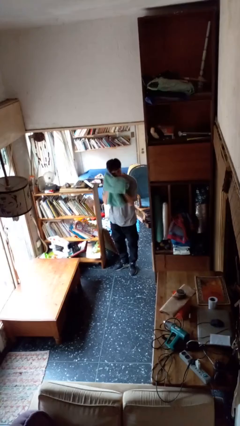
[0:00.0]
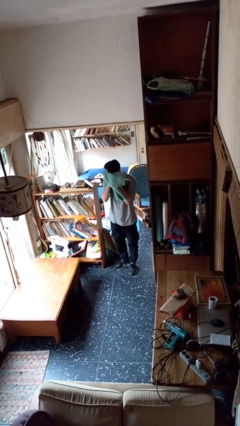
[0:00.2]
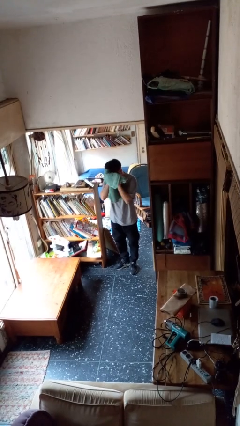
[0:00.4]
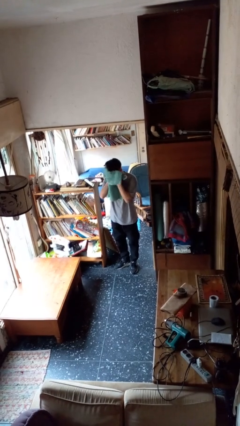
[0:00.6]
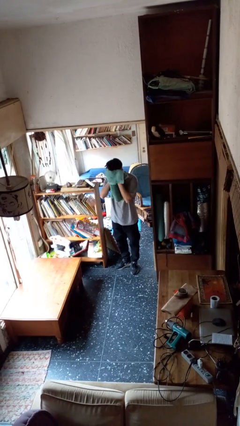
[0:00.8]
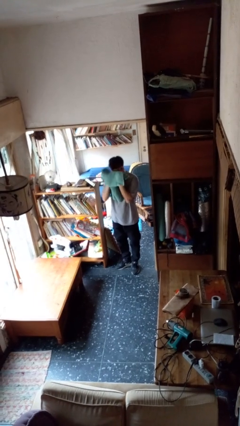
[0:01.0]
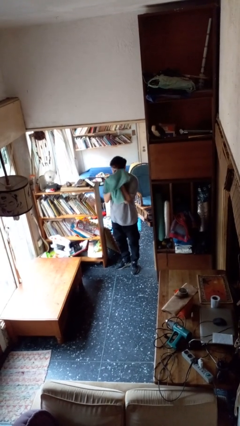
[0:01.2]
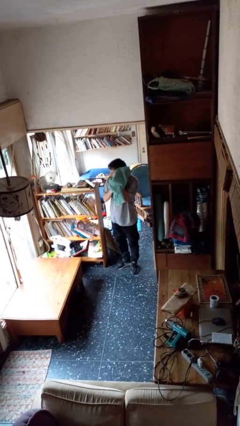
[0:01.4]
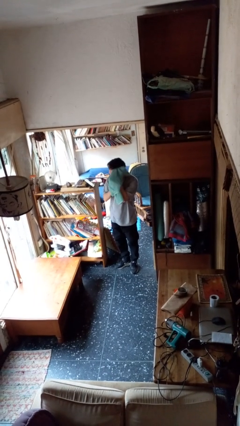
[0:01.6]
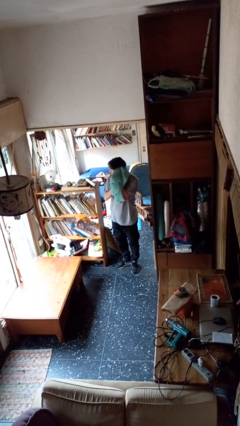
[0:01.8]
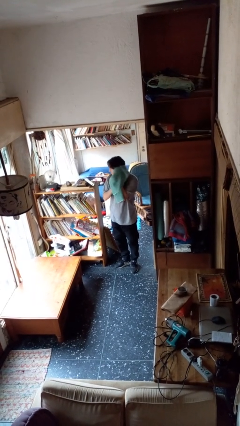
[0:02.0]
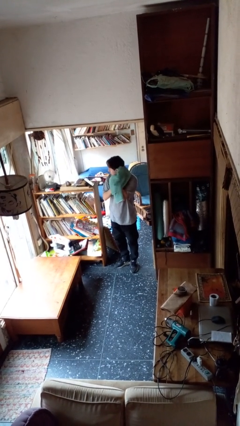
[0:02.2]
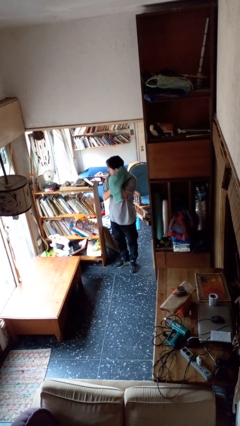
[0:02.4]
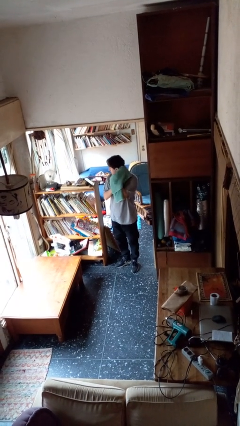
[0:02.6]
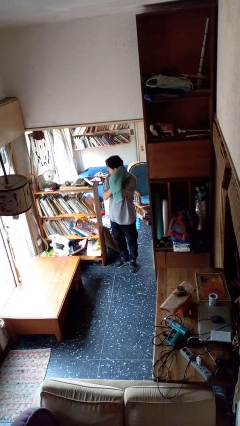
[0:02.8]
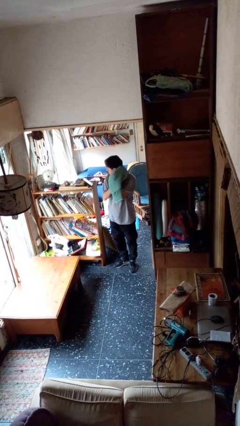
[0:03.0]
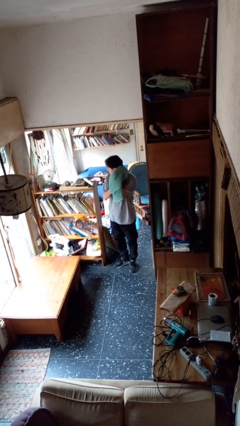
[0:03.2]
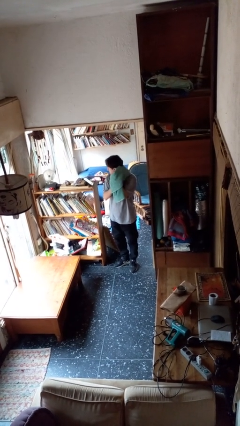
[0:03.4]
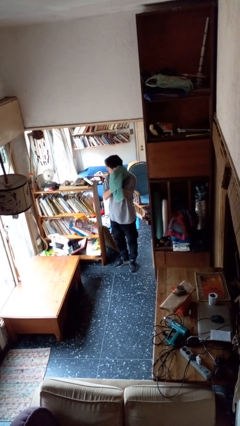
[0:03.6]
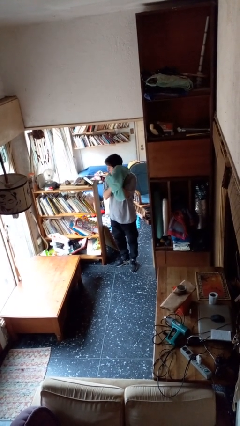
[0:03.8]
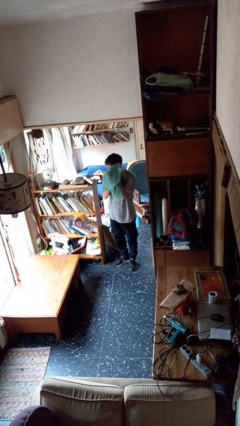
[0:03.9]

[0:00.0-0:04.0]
person dries hair with towel

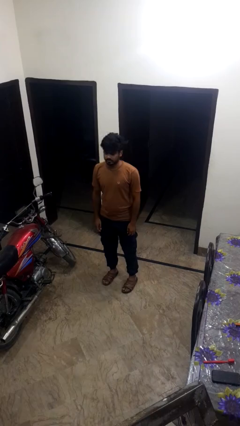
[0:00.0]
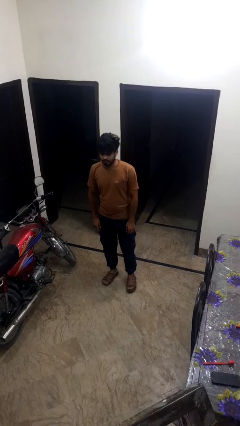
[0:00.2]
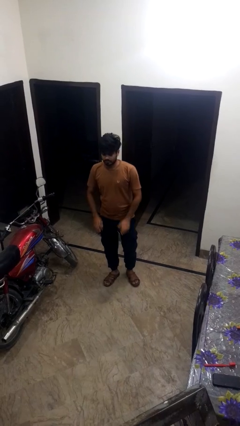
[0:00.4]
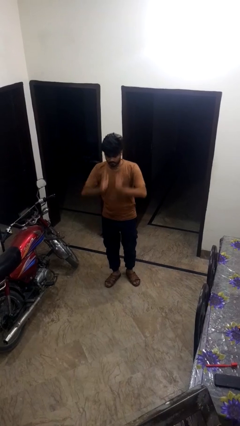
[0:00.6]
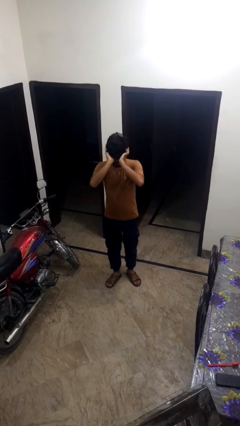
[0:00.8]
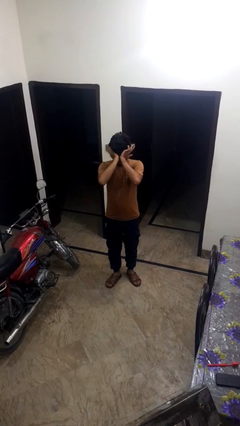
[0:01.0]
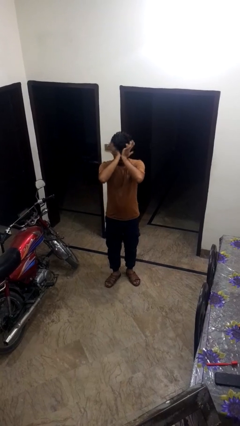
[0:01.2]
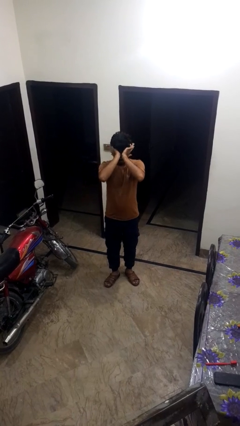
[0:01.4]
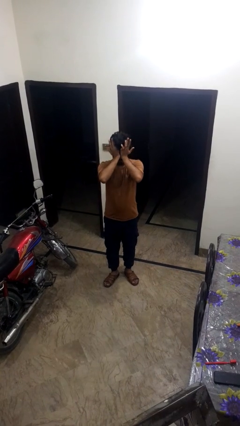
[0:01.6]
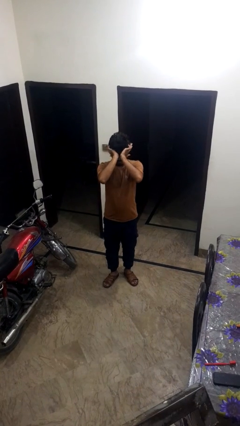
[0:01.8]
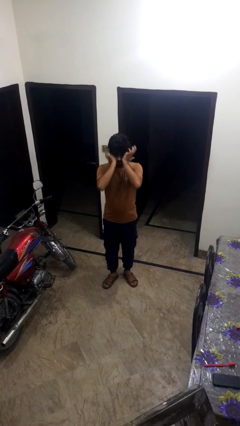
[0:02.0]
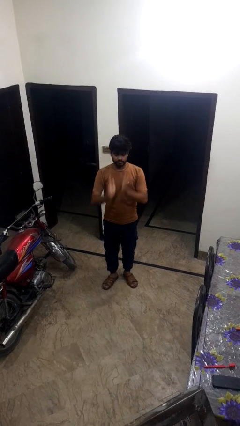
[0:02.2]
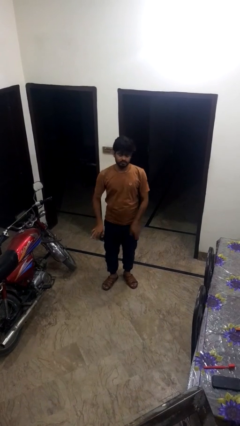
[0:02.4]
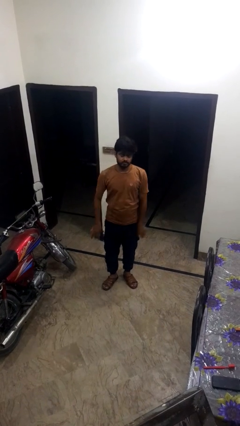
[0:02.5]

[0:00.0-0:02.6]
person rubs eyes

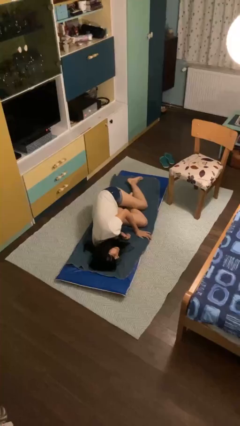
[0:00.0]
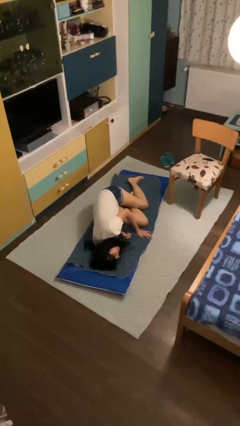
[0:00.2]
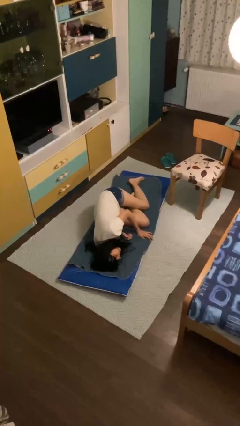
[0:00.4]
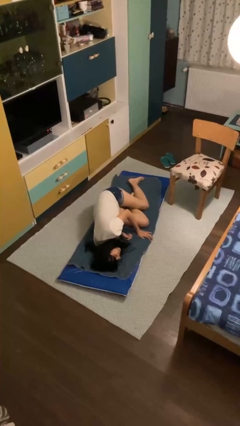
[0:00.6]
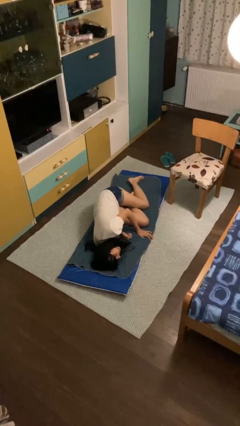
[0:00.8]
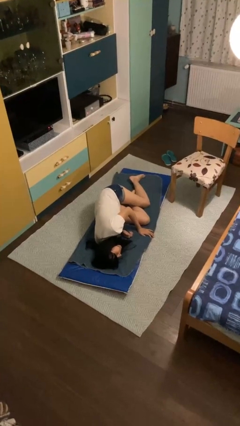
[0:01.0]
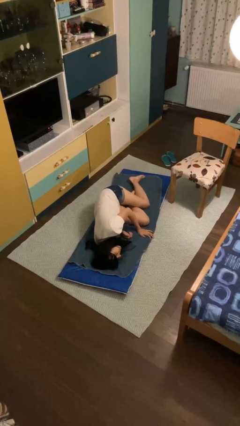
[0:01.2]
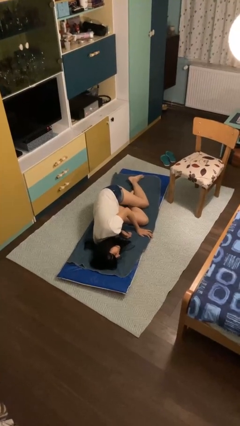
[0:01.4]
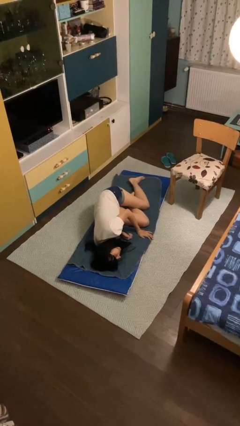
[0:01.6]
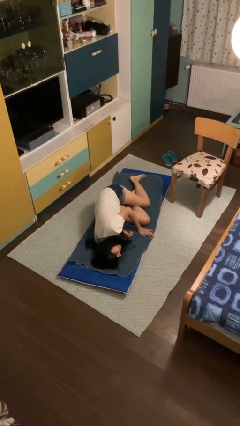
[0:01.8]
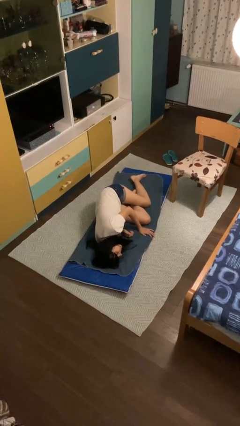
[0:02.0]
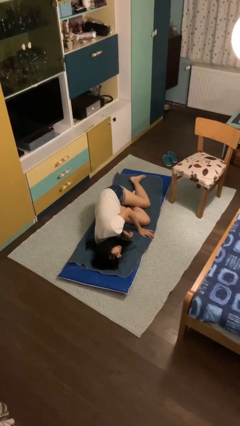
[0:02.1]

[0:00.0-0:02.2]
person lies down on floor

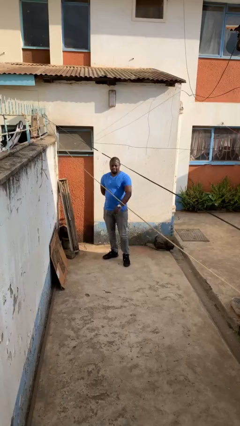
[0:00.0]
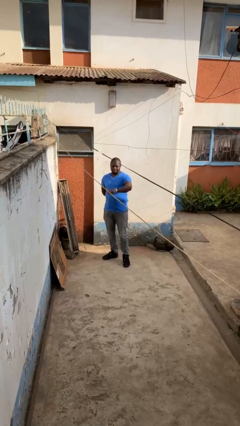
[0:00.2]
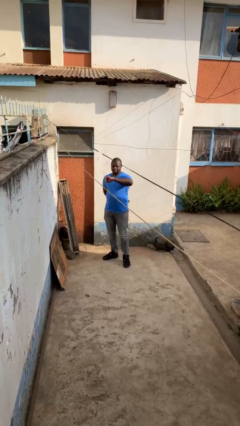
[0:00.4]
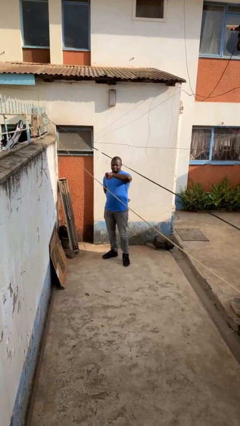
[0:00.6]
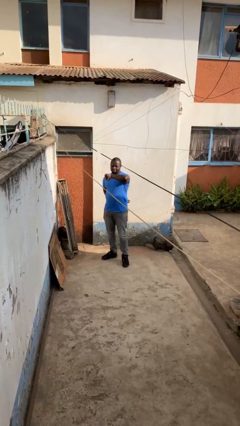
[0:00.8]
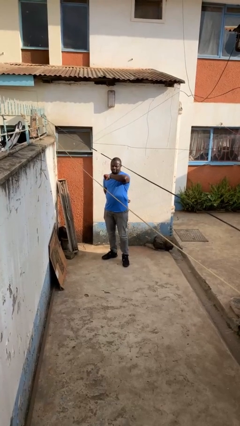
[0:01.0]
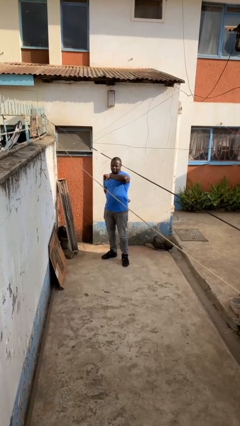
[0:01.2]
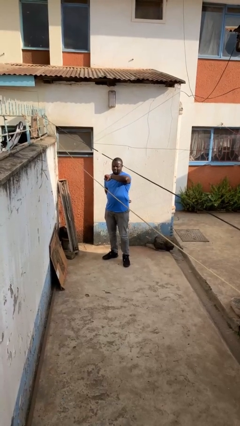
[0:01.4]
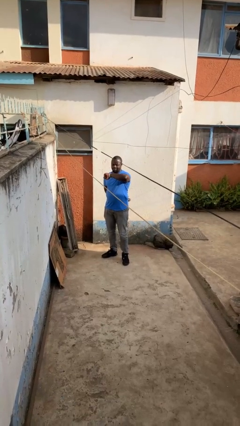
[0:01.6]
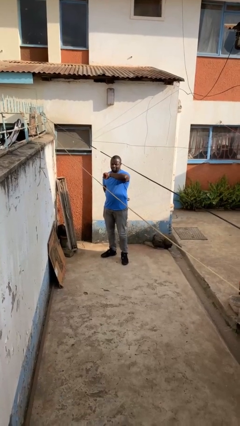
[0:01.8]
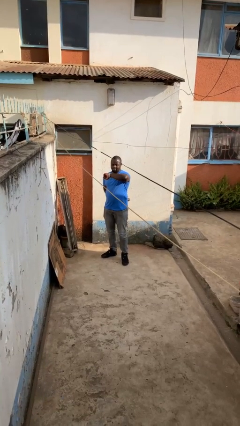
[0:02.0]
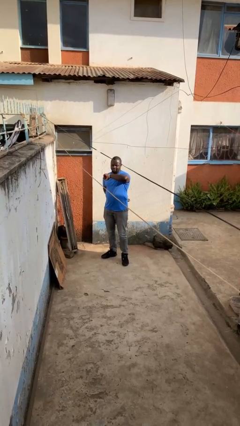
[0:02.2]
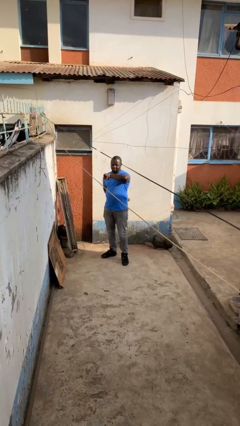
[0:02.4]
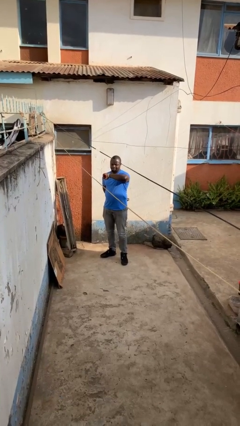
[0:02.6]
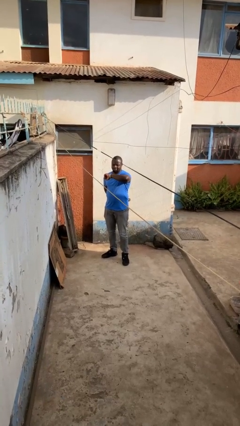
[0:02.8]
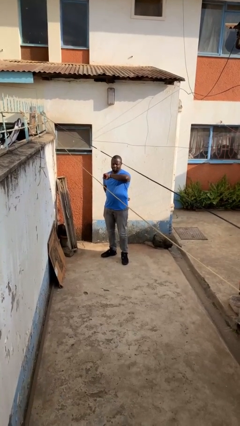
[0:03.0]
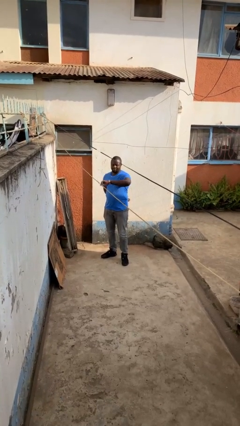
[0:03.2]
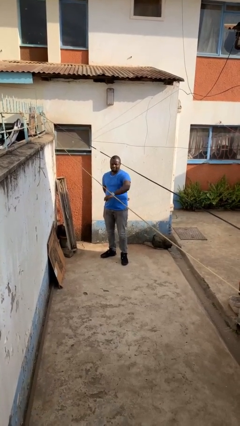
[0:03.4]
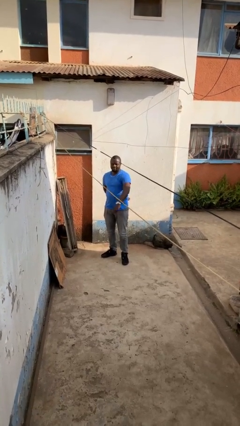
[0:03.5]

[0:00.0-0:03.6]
person looks at wristwatch

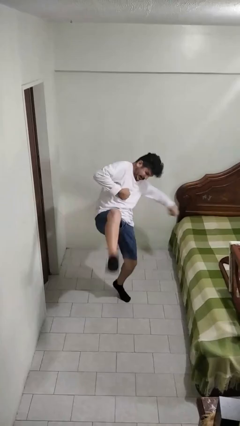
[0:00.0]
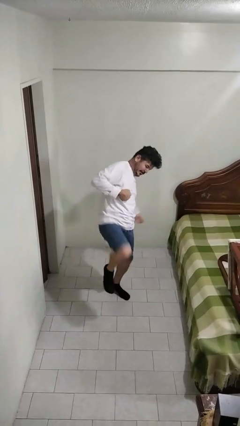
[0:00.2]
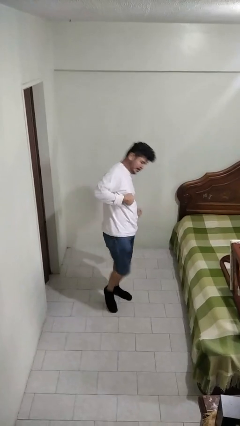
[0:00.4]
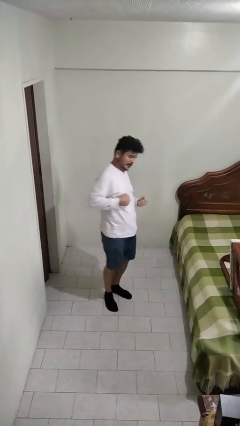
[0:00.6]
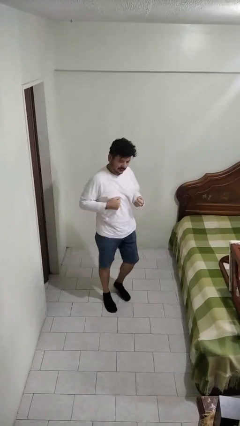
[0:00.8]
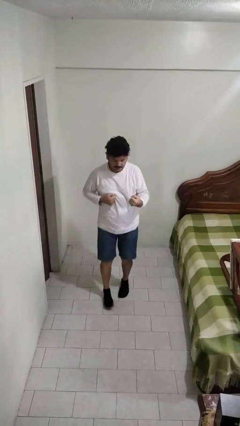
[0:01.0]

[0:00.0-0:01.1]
person karate kicks

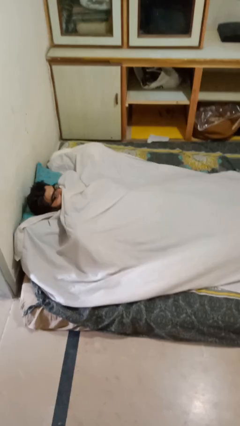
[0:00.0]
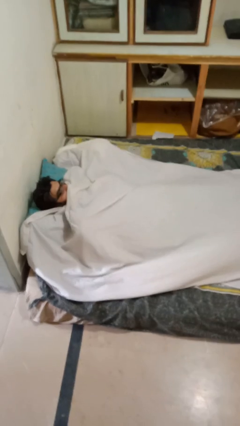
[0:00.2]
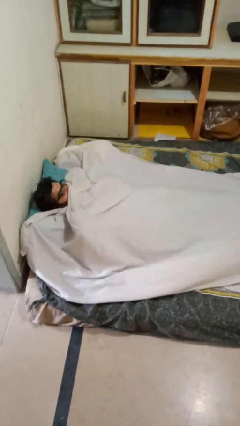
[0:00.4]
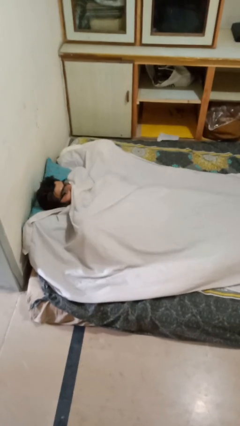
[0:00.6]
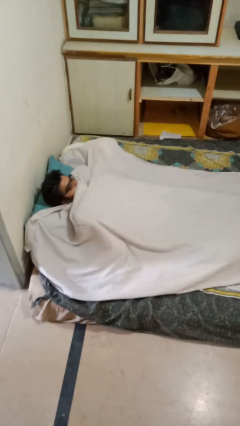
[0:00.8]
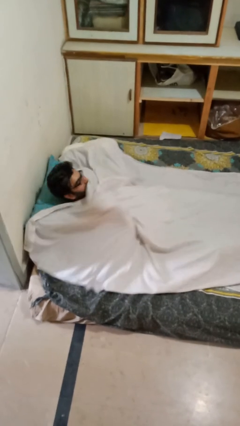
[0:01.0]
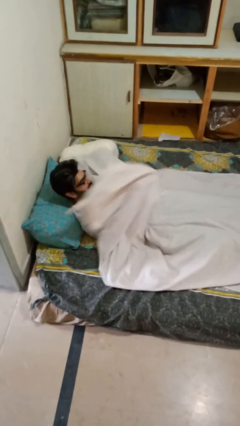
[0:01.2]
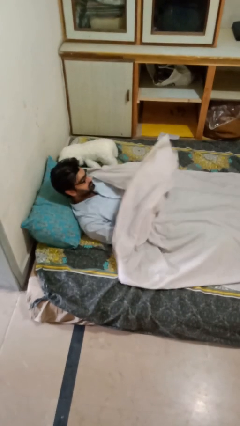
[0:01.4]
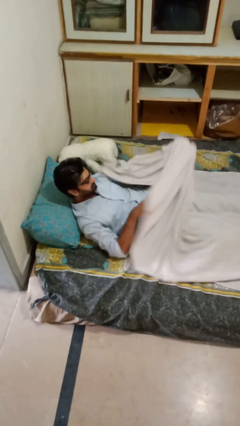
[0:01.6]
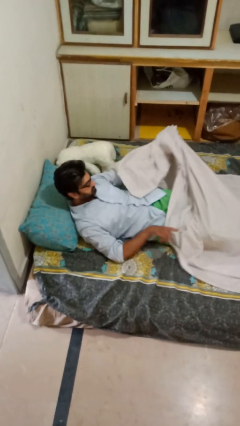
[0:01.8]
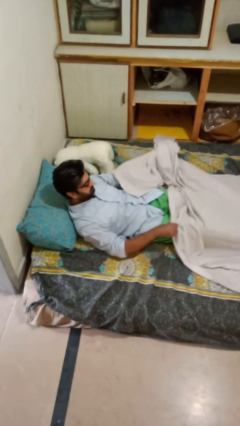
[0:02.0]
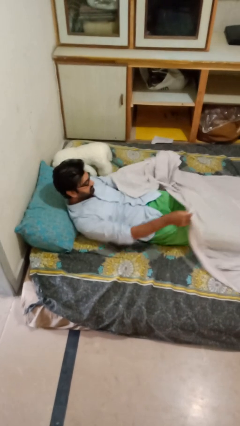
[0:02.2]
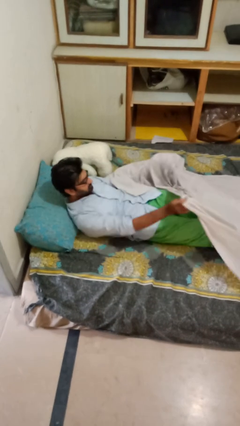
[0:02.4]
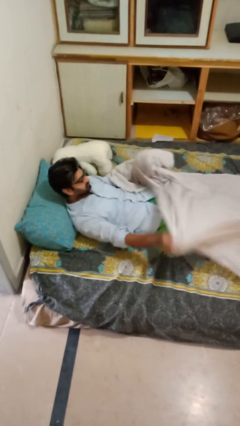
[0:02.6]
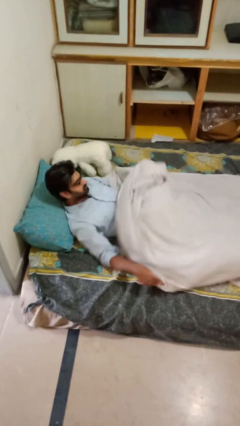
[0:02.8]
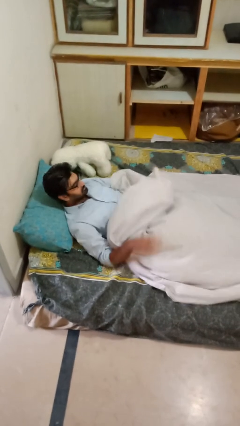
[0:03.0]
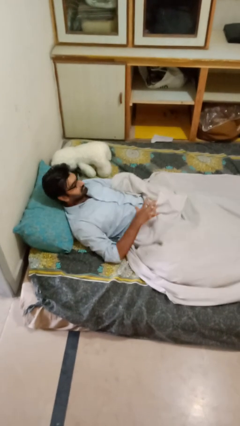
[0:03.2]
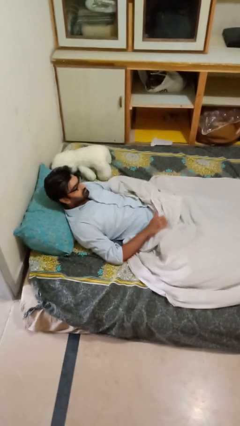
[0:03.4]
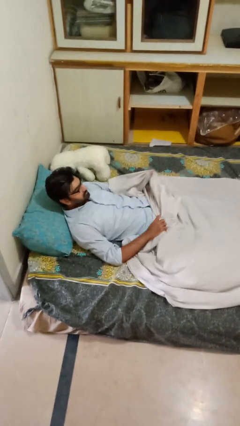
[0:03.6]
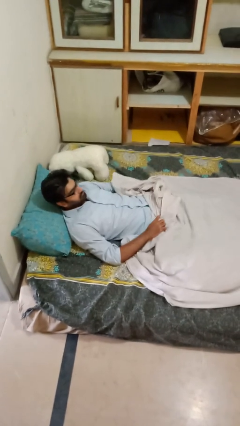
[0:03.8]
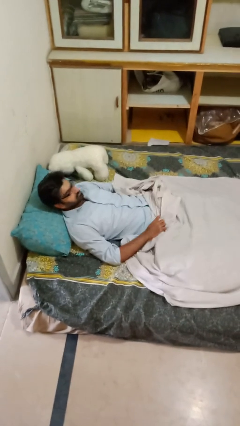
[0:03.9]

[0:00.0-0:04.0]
person uncovers with bedsheets
